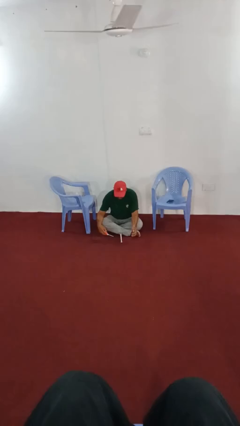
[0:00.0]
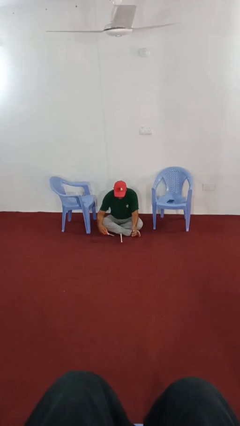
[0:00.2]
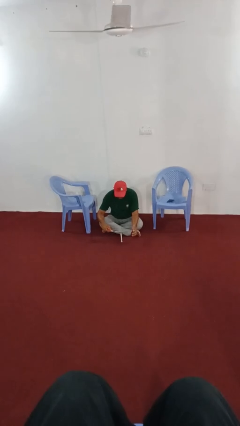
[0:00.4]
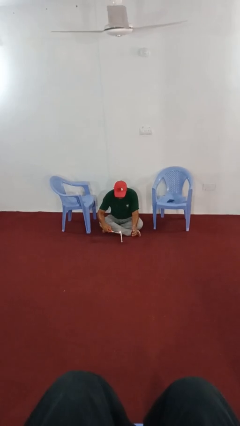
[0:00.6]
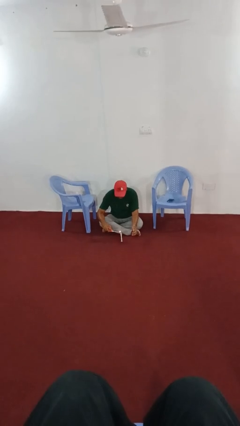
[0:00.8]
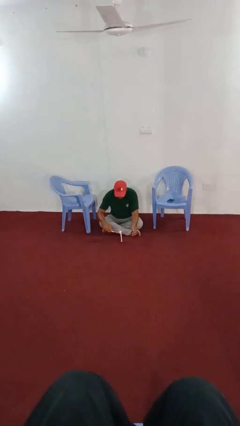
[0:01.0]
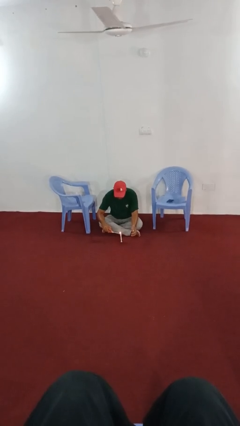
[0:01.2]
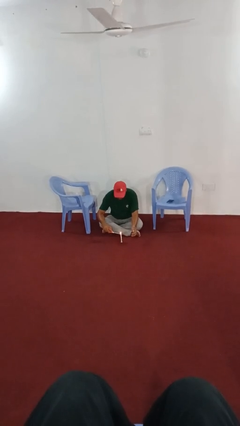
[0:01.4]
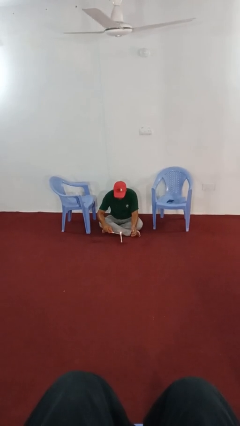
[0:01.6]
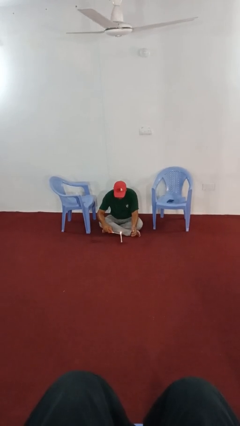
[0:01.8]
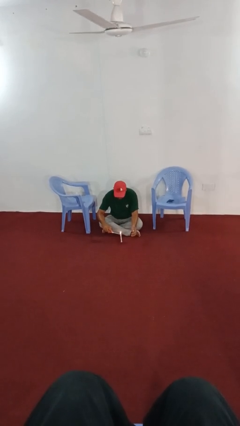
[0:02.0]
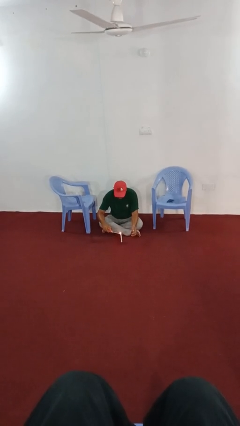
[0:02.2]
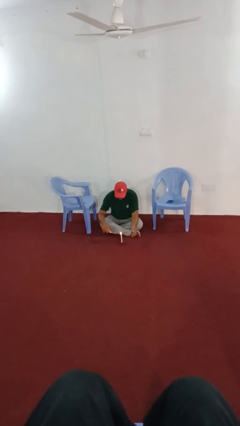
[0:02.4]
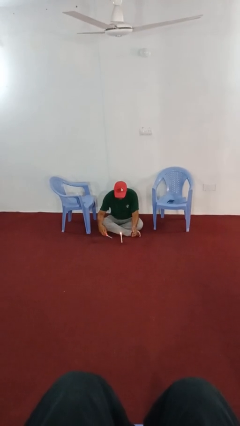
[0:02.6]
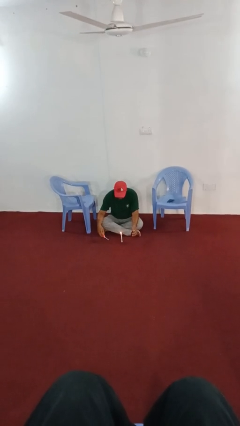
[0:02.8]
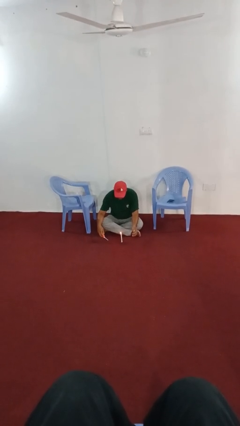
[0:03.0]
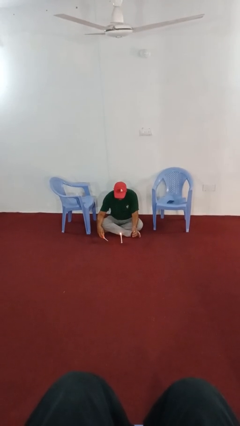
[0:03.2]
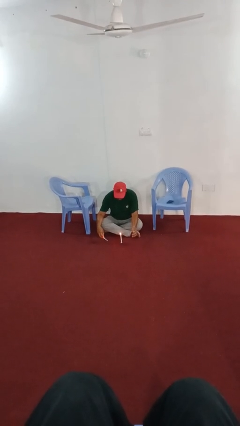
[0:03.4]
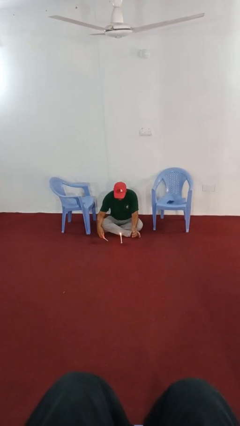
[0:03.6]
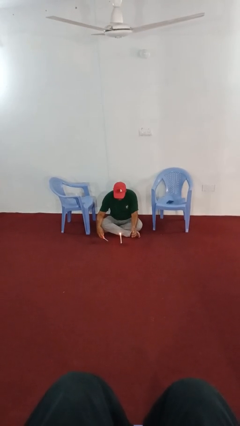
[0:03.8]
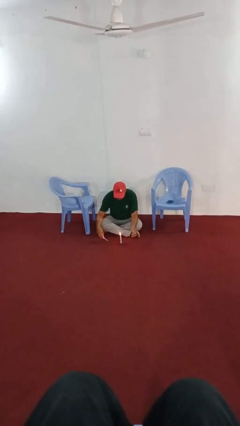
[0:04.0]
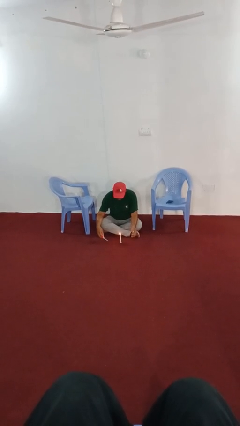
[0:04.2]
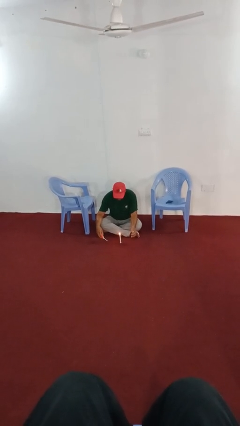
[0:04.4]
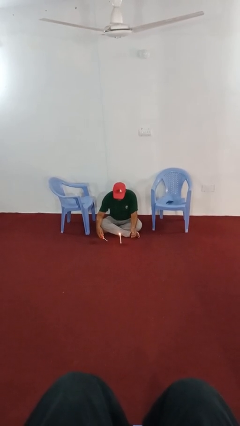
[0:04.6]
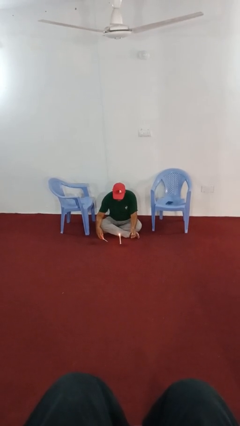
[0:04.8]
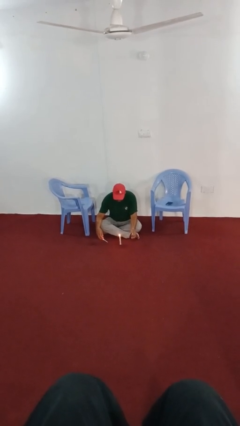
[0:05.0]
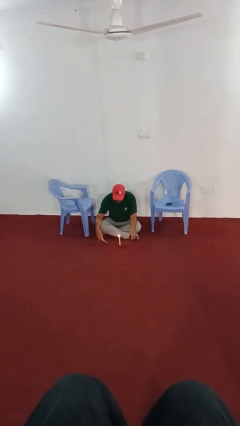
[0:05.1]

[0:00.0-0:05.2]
person lights candle

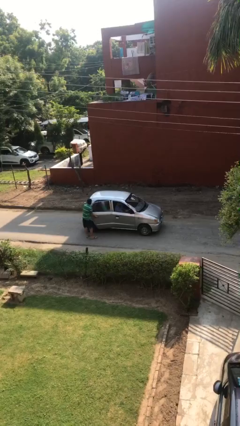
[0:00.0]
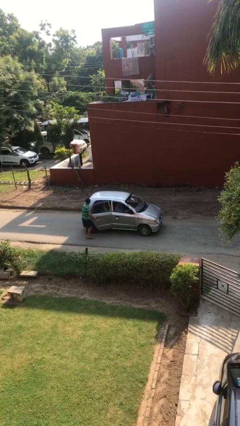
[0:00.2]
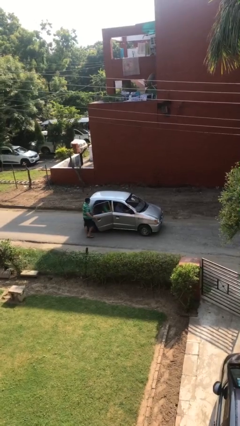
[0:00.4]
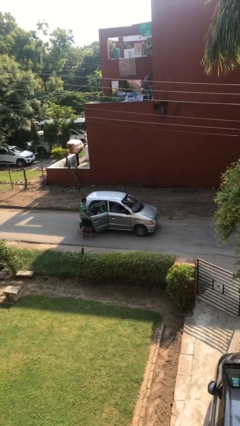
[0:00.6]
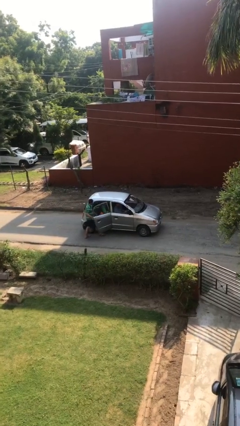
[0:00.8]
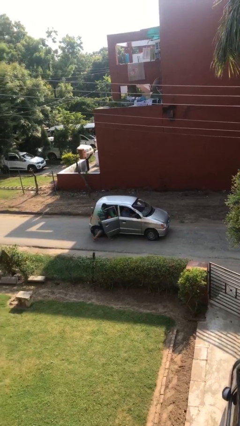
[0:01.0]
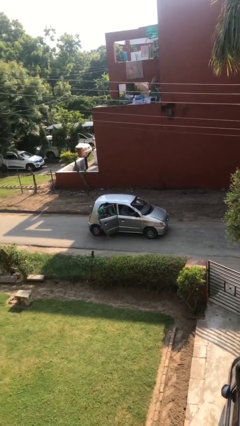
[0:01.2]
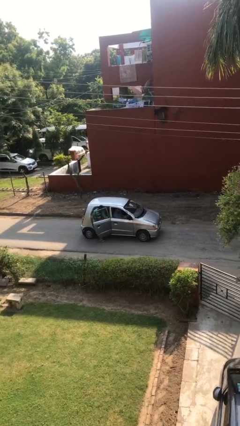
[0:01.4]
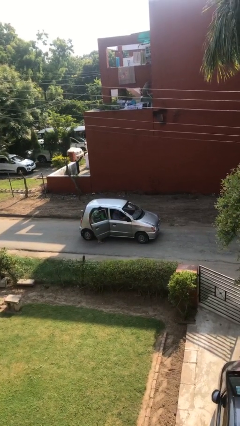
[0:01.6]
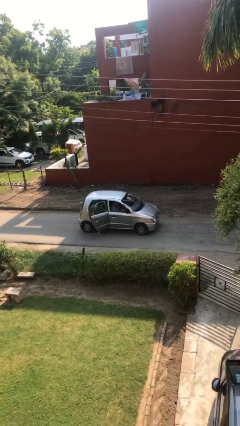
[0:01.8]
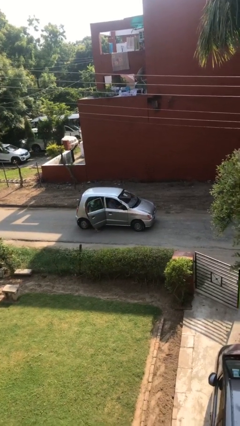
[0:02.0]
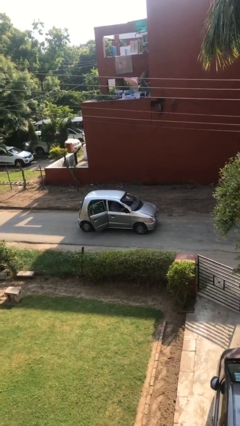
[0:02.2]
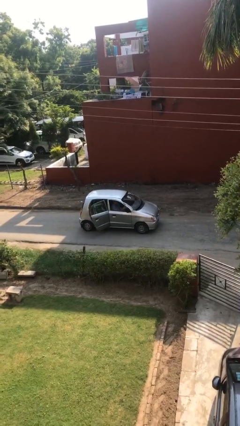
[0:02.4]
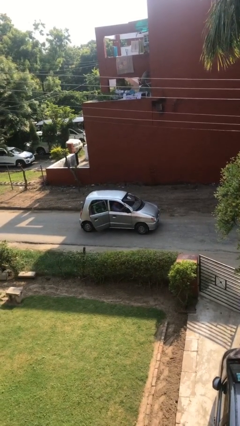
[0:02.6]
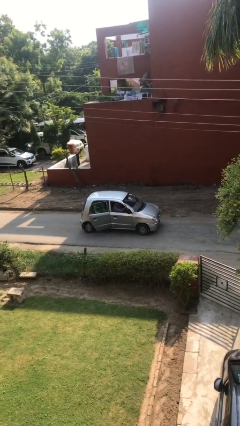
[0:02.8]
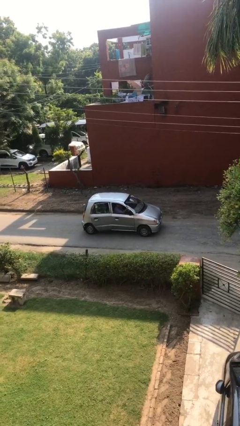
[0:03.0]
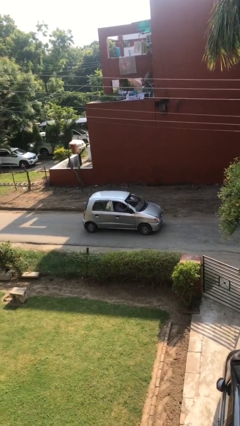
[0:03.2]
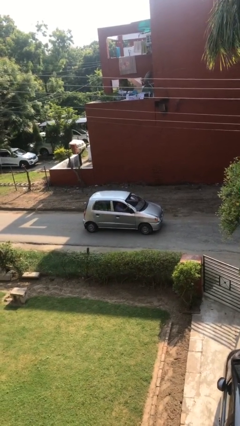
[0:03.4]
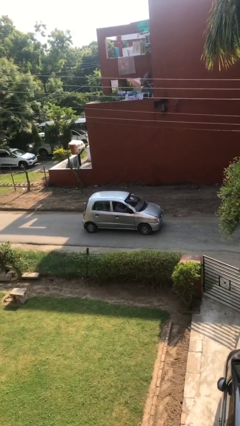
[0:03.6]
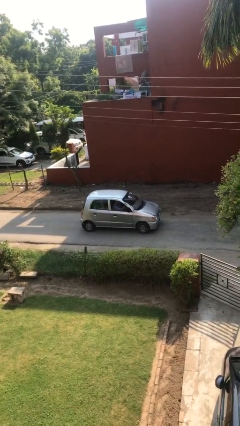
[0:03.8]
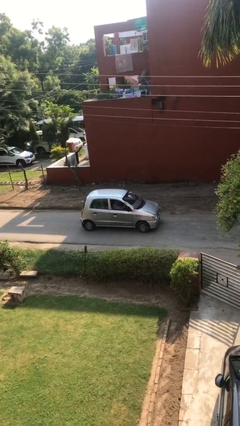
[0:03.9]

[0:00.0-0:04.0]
car picks up person

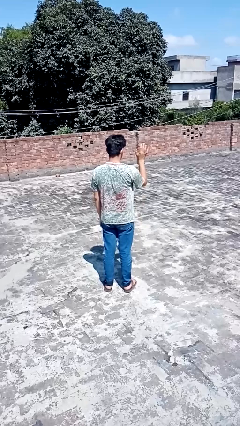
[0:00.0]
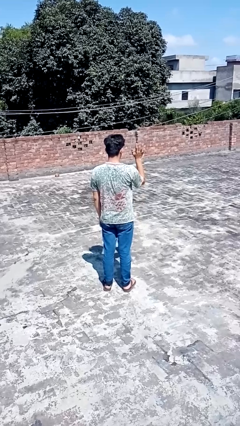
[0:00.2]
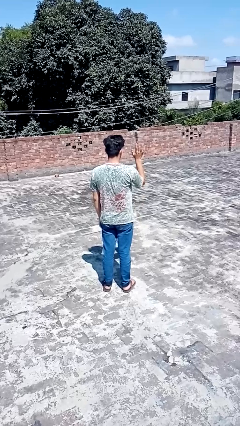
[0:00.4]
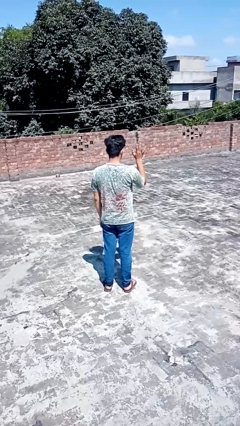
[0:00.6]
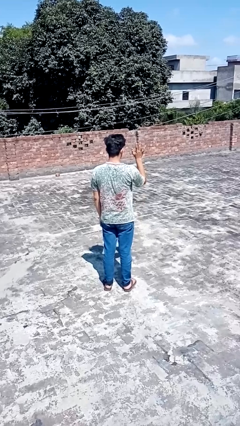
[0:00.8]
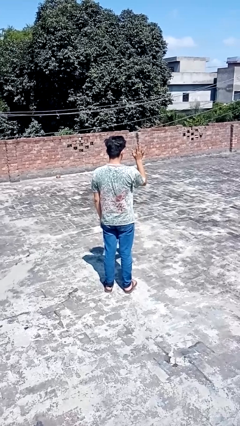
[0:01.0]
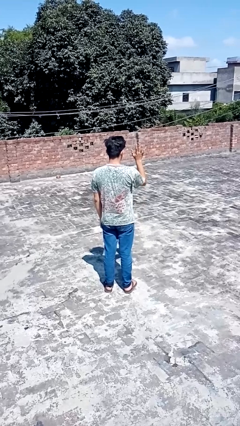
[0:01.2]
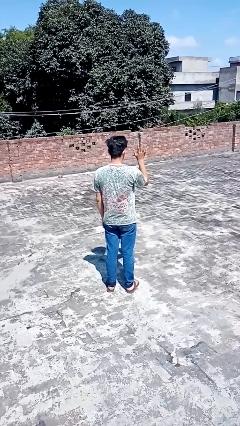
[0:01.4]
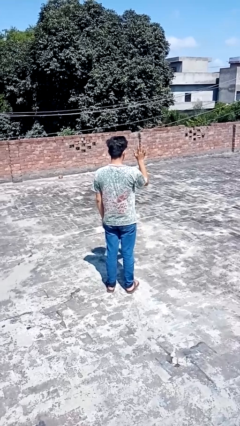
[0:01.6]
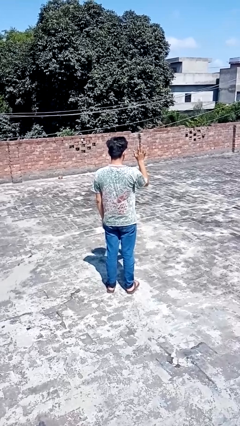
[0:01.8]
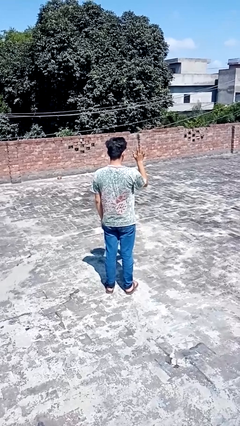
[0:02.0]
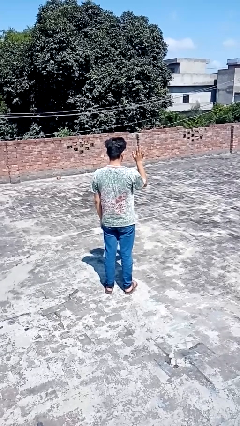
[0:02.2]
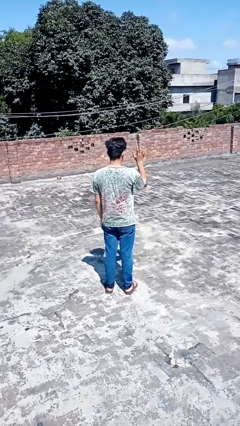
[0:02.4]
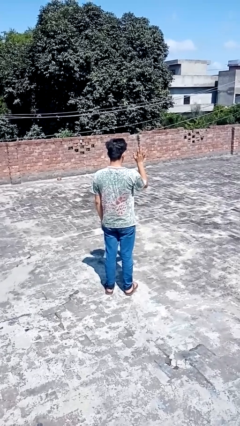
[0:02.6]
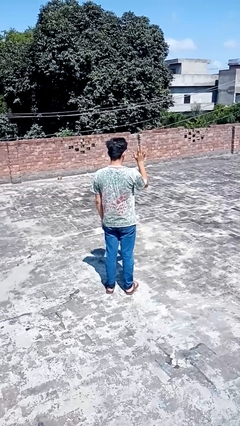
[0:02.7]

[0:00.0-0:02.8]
person gestures number five

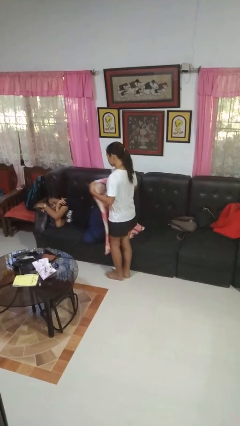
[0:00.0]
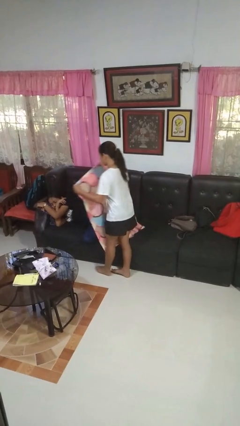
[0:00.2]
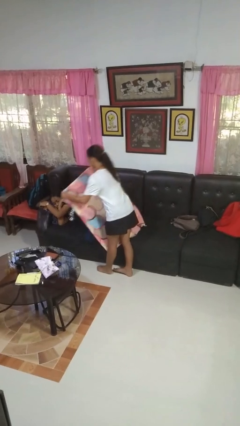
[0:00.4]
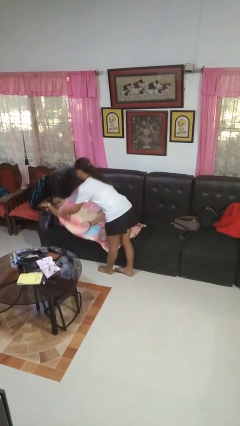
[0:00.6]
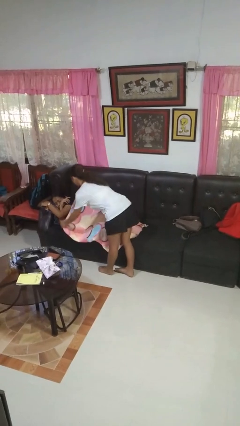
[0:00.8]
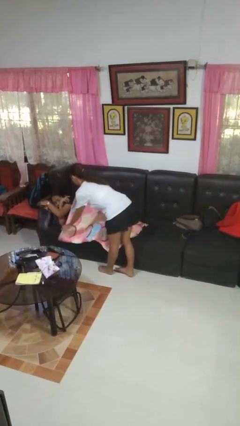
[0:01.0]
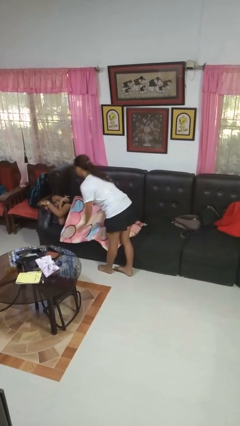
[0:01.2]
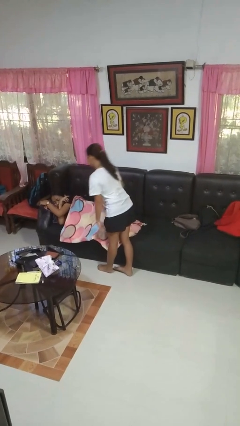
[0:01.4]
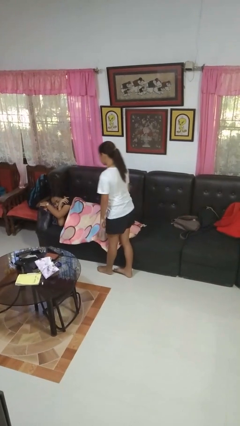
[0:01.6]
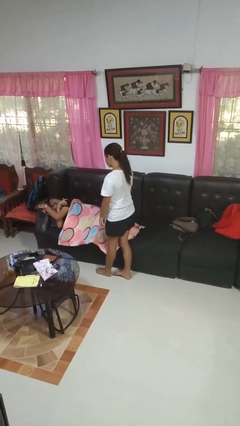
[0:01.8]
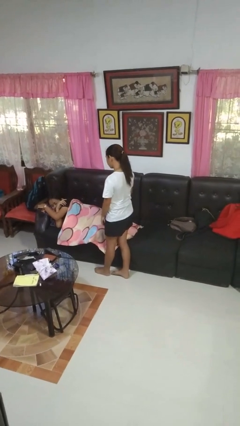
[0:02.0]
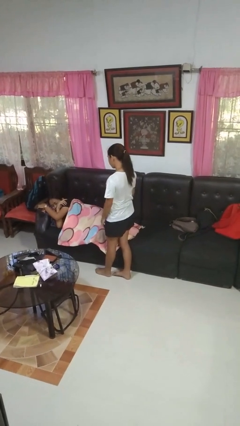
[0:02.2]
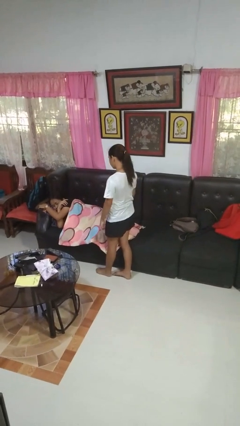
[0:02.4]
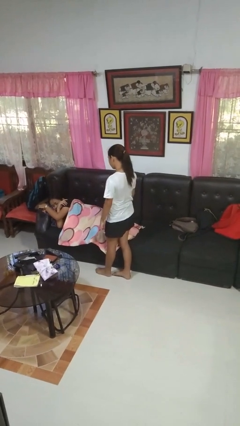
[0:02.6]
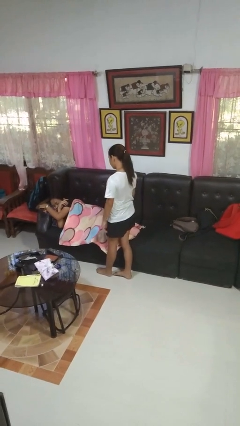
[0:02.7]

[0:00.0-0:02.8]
person covers friend with blanket

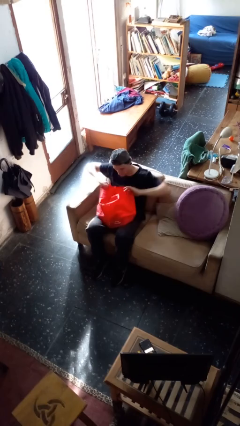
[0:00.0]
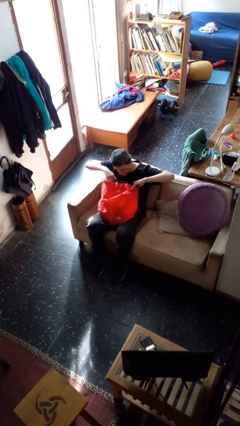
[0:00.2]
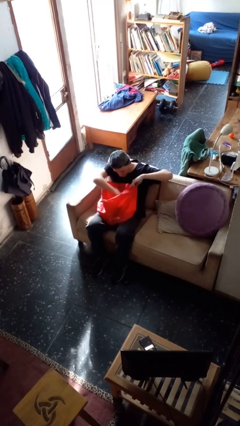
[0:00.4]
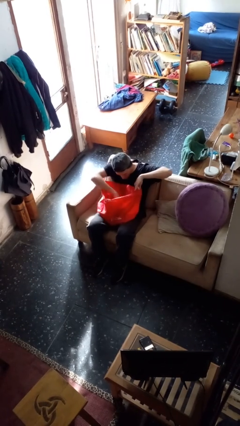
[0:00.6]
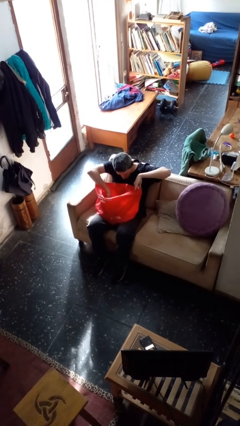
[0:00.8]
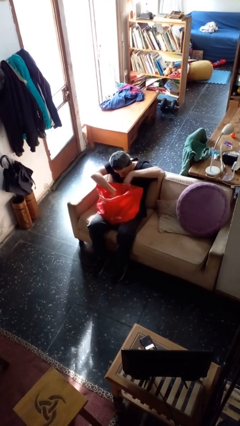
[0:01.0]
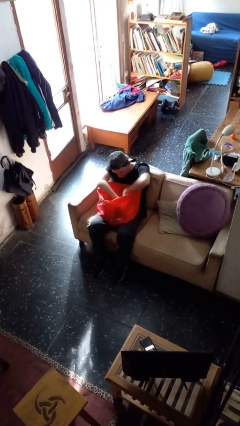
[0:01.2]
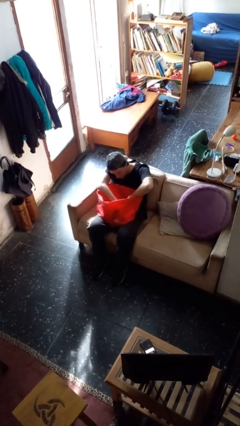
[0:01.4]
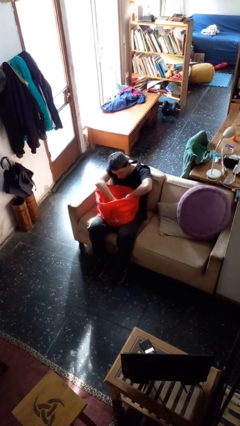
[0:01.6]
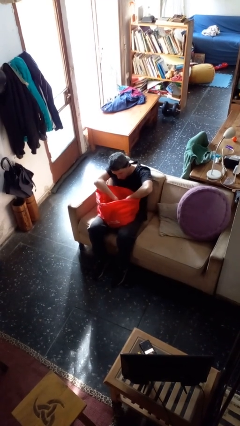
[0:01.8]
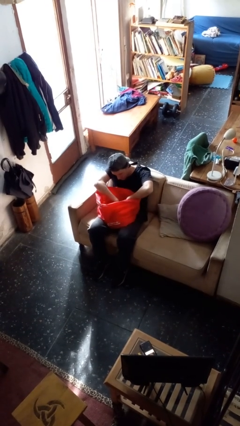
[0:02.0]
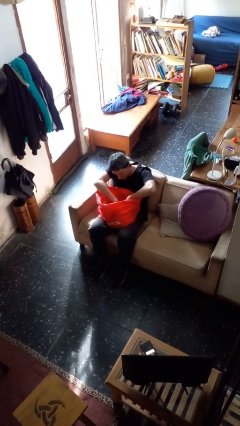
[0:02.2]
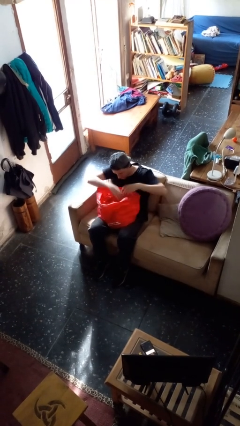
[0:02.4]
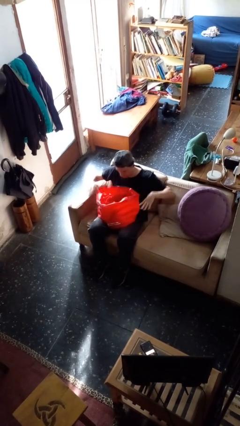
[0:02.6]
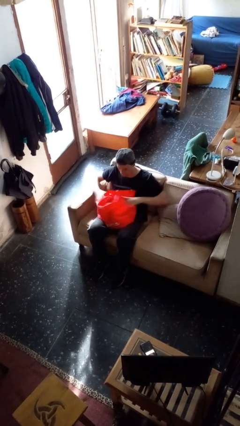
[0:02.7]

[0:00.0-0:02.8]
person searches in bag
